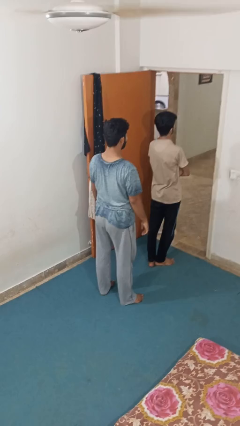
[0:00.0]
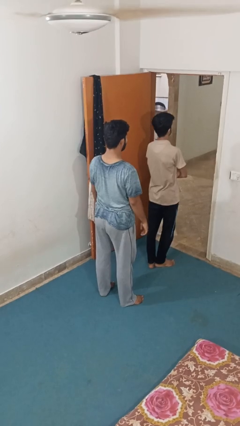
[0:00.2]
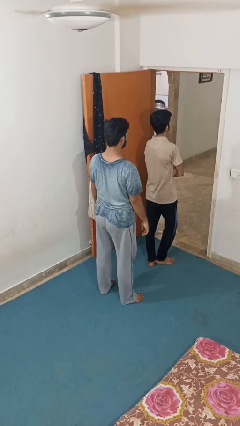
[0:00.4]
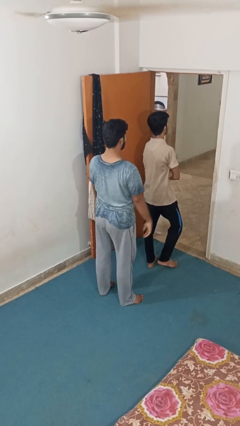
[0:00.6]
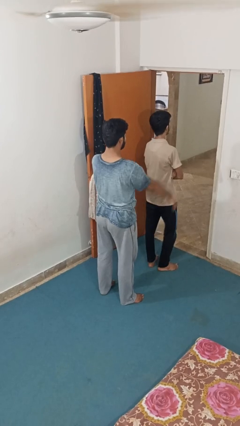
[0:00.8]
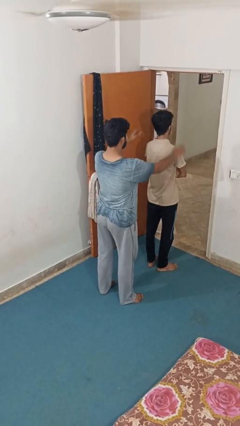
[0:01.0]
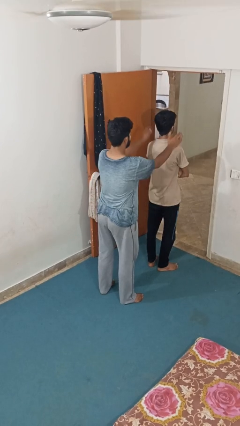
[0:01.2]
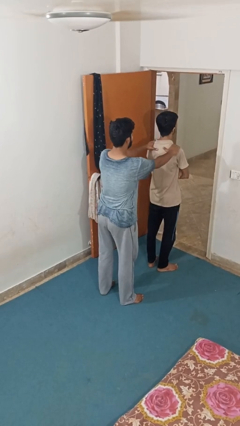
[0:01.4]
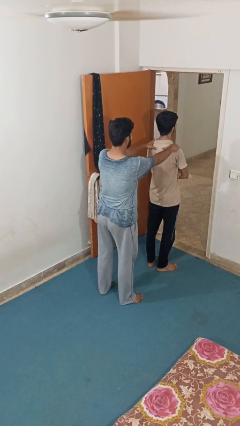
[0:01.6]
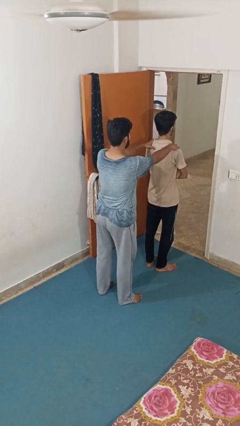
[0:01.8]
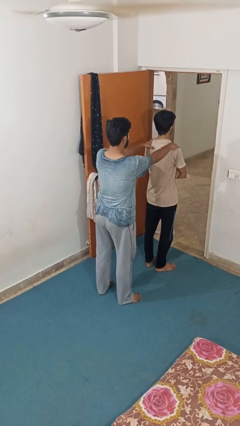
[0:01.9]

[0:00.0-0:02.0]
person grabs person by shoulder

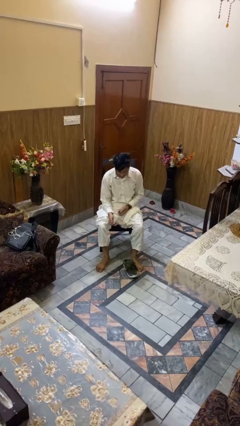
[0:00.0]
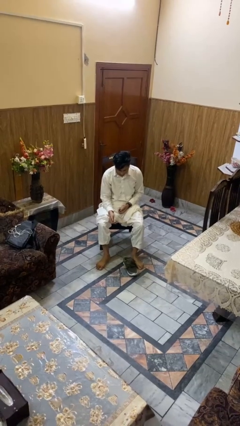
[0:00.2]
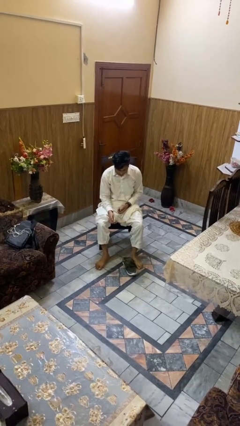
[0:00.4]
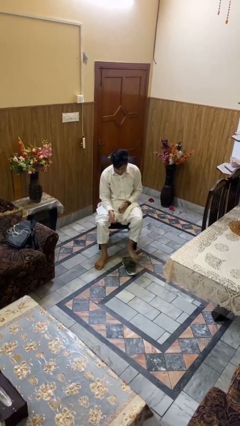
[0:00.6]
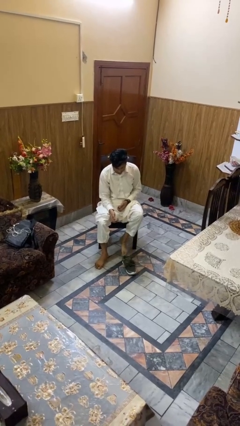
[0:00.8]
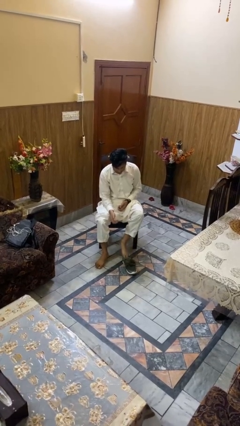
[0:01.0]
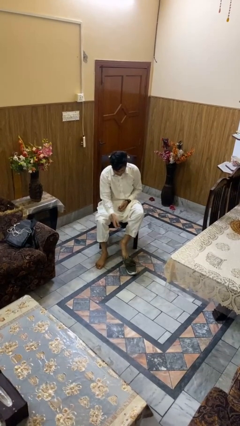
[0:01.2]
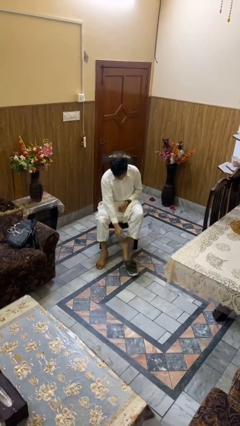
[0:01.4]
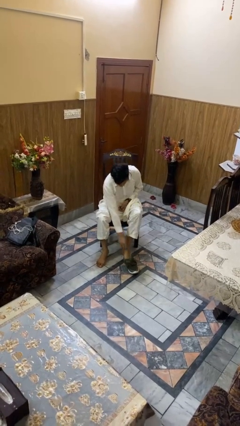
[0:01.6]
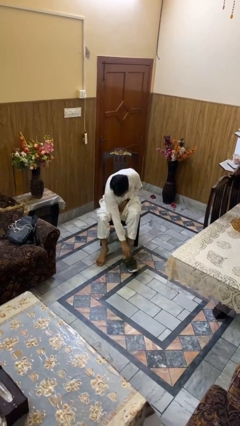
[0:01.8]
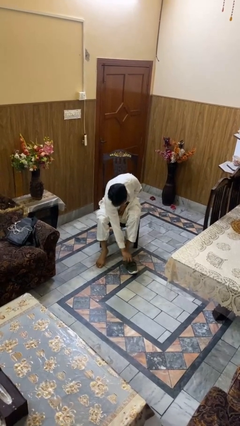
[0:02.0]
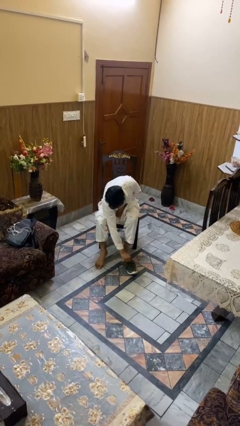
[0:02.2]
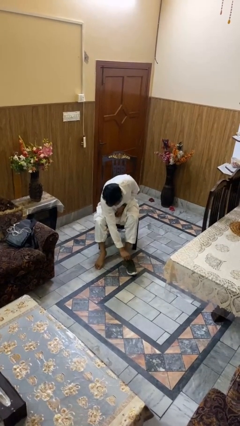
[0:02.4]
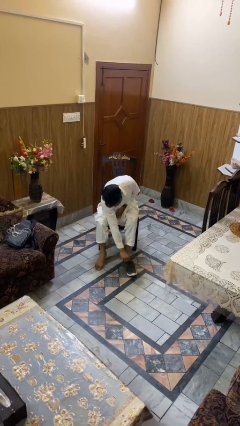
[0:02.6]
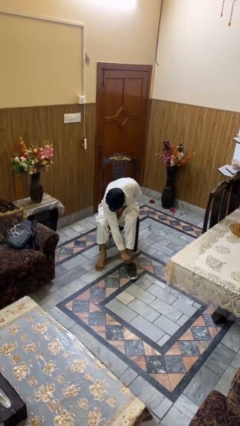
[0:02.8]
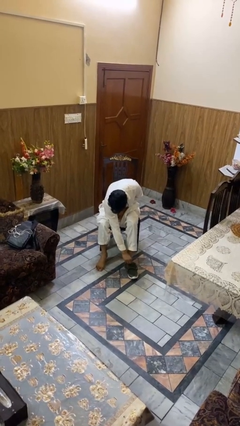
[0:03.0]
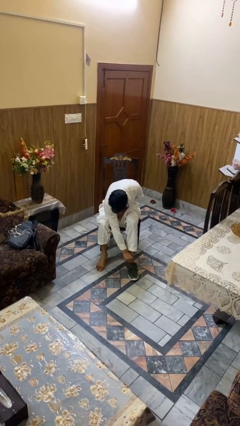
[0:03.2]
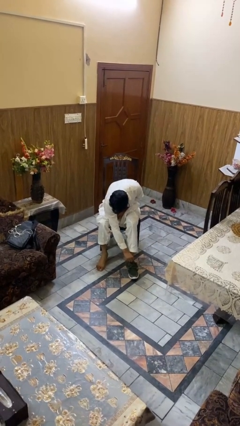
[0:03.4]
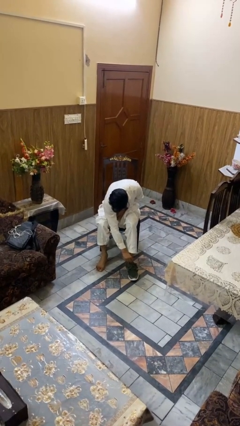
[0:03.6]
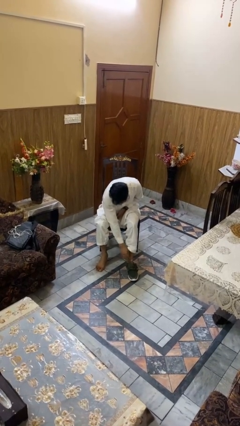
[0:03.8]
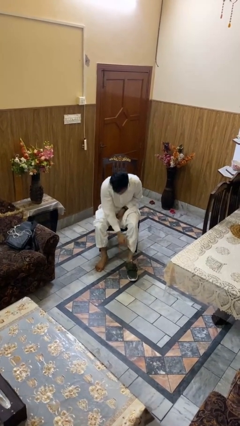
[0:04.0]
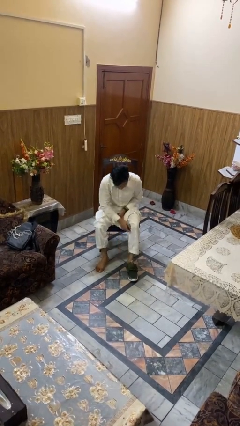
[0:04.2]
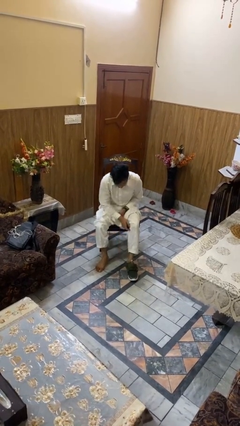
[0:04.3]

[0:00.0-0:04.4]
person puts on shoes

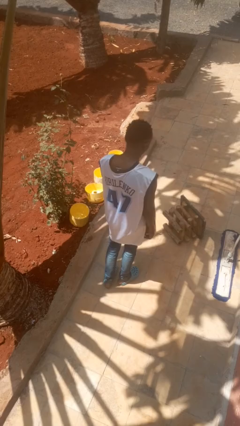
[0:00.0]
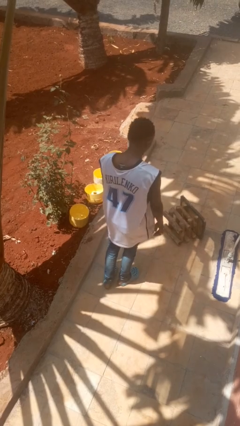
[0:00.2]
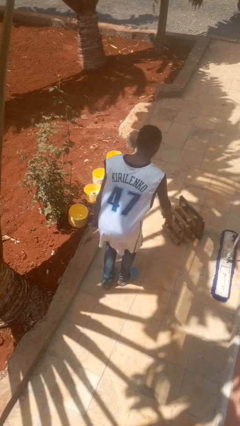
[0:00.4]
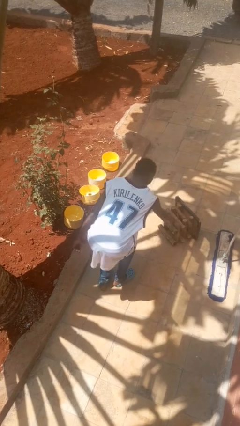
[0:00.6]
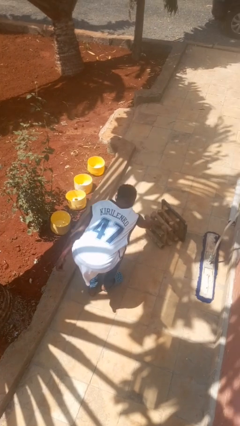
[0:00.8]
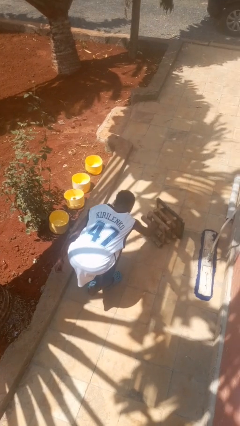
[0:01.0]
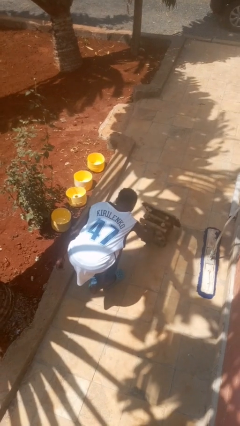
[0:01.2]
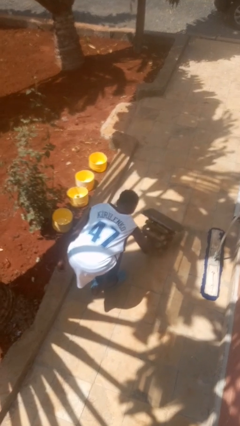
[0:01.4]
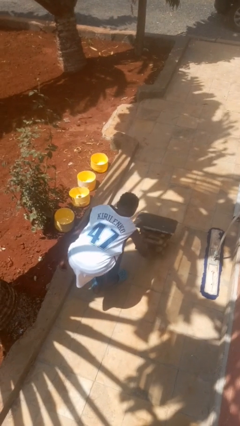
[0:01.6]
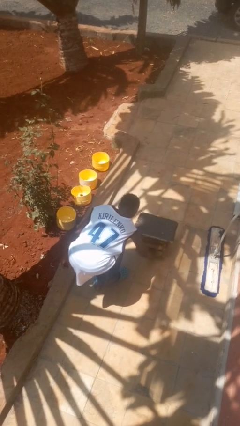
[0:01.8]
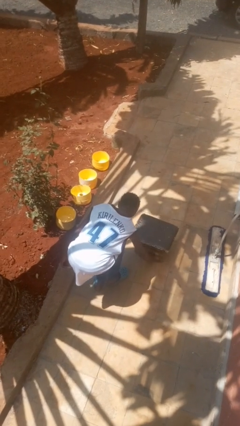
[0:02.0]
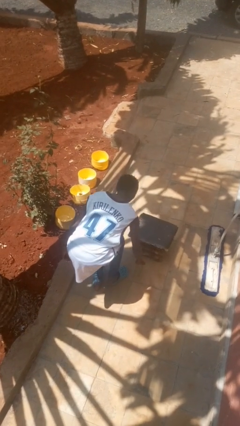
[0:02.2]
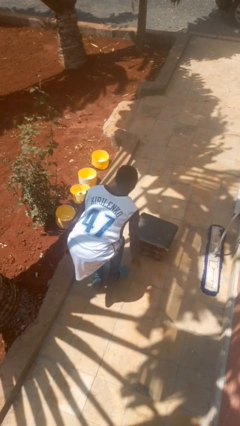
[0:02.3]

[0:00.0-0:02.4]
person sets upright furniture

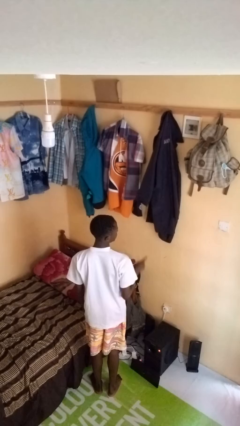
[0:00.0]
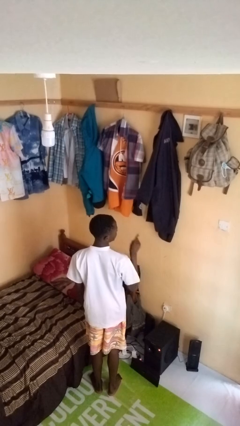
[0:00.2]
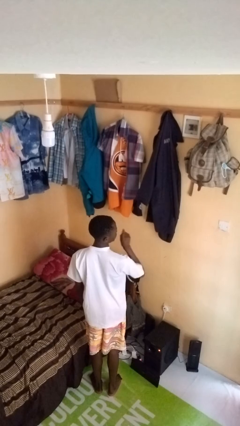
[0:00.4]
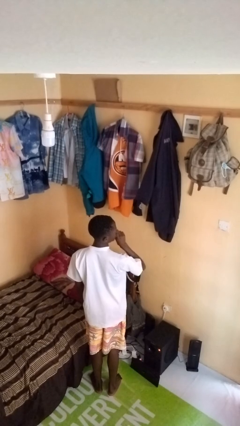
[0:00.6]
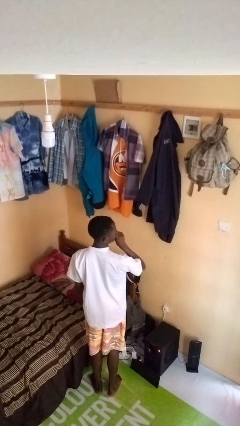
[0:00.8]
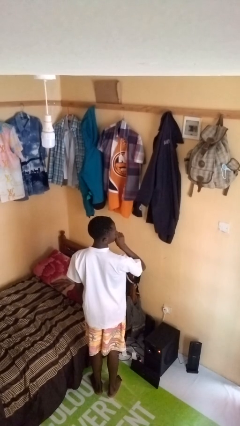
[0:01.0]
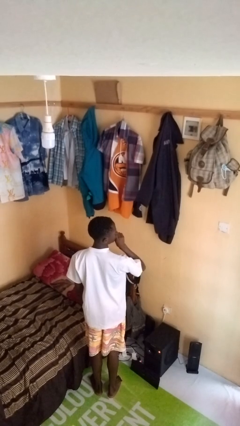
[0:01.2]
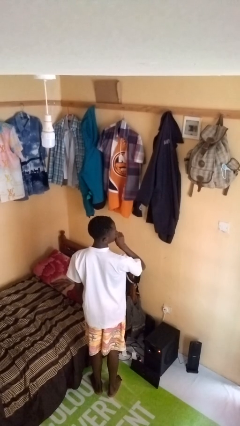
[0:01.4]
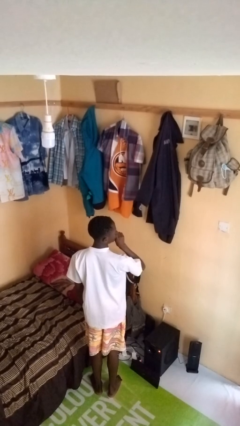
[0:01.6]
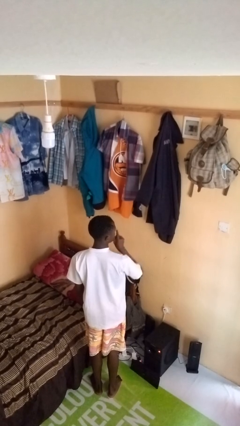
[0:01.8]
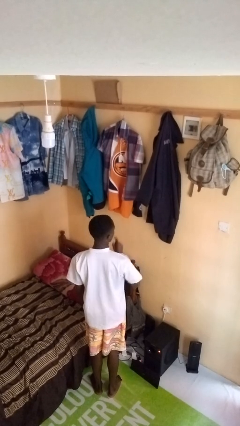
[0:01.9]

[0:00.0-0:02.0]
person gestures be quiet

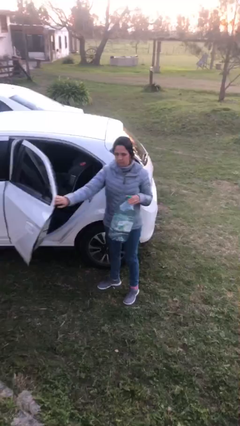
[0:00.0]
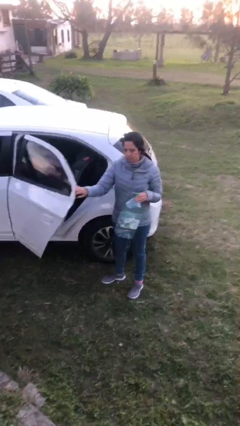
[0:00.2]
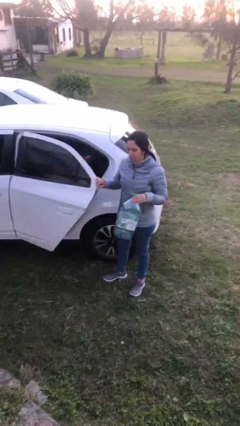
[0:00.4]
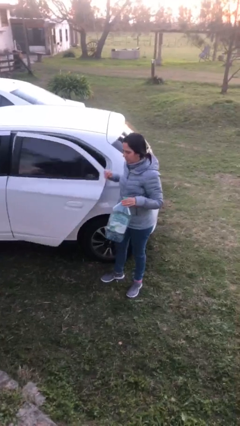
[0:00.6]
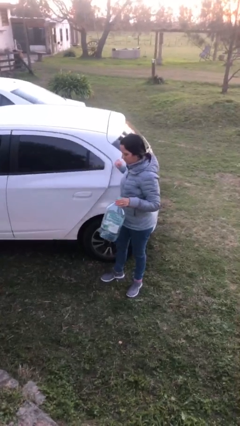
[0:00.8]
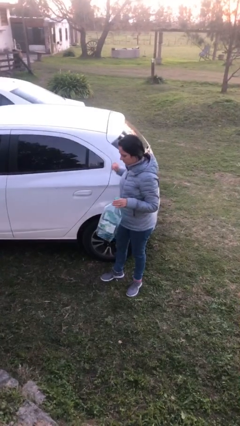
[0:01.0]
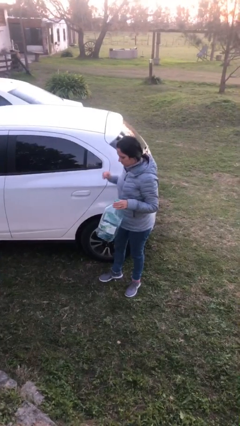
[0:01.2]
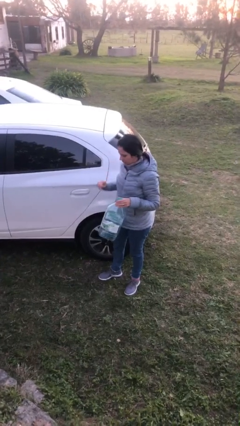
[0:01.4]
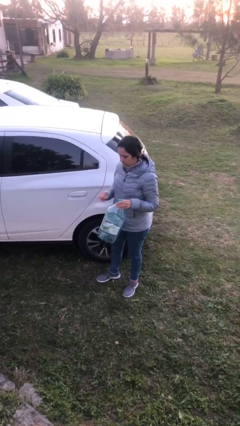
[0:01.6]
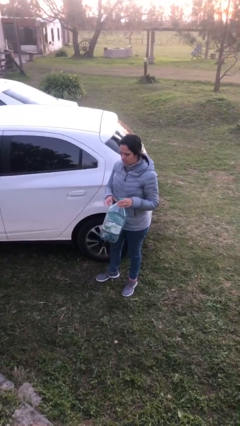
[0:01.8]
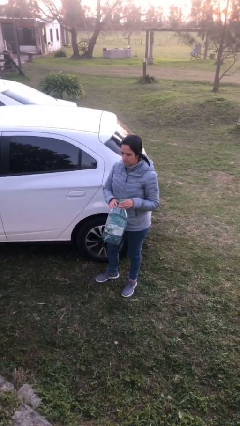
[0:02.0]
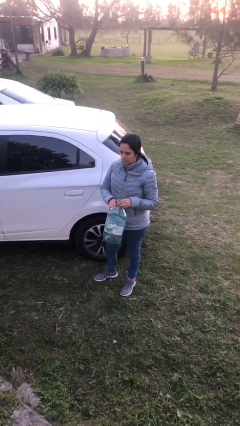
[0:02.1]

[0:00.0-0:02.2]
person closes car door

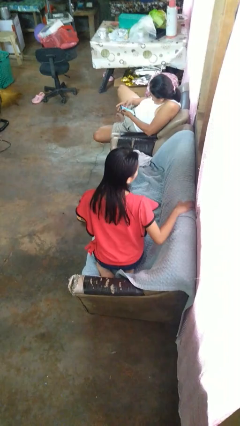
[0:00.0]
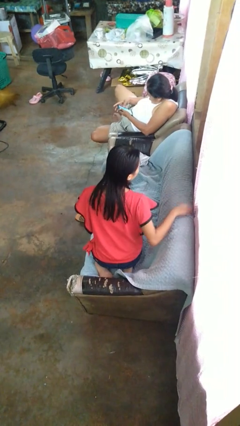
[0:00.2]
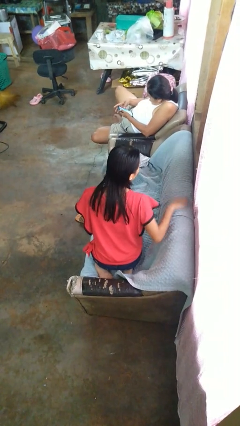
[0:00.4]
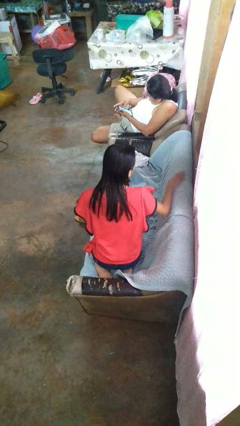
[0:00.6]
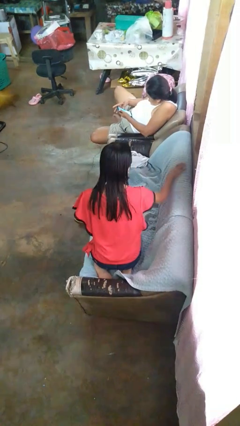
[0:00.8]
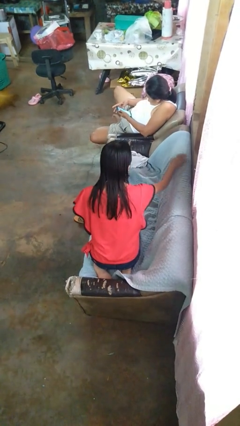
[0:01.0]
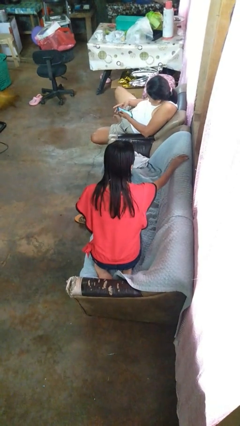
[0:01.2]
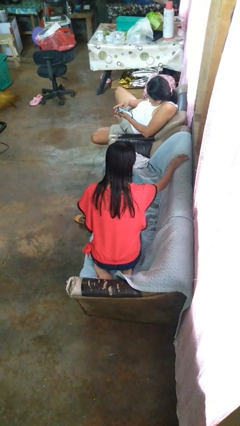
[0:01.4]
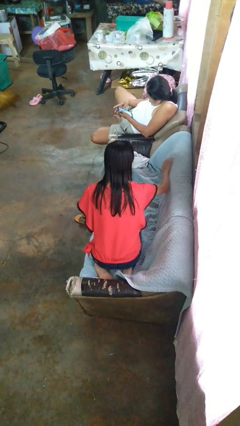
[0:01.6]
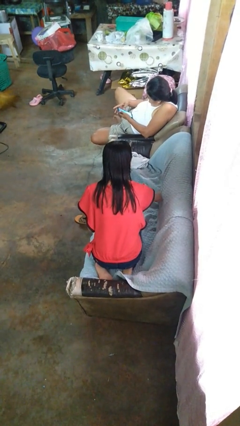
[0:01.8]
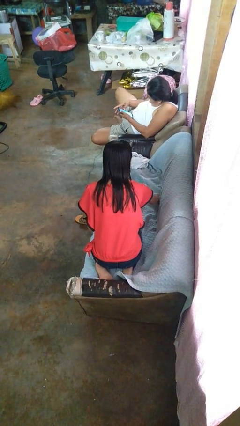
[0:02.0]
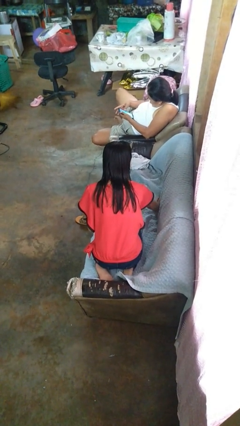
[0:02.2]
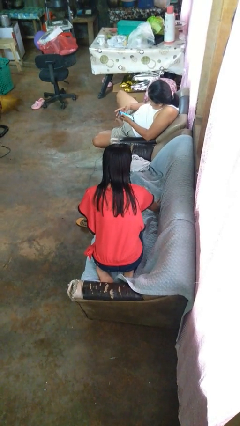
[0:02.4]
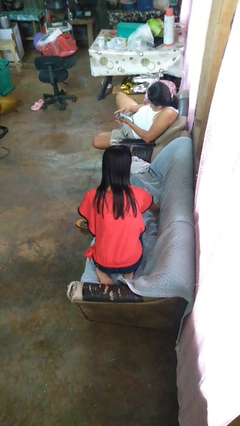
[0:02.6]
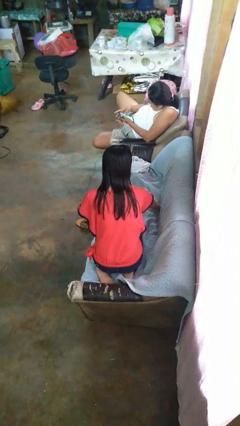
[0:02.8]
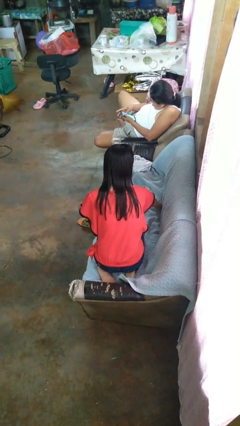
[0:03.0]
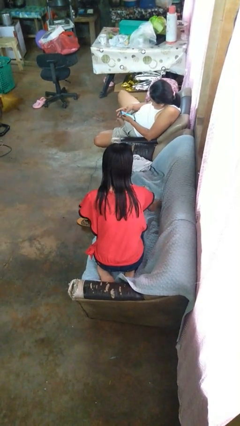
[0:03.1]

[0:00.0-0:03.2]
person searches in couch

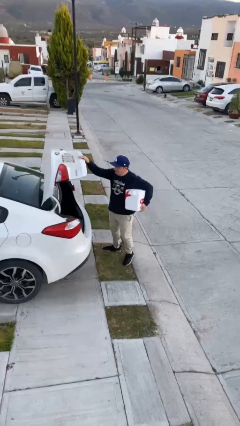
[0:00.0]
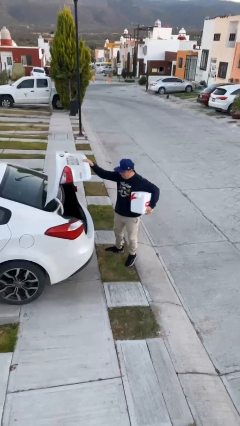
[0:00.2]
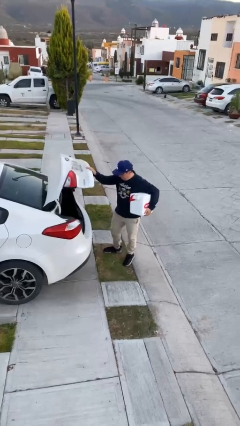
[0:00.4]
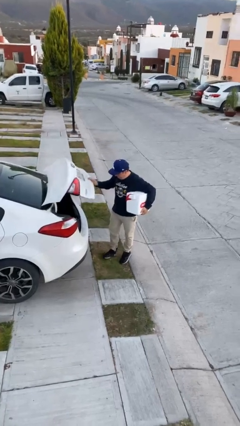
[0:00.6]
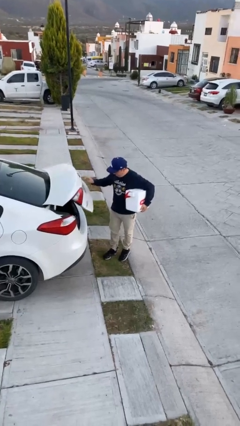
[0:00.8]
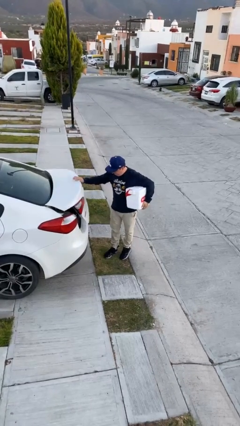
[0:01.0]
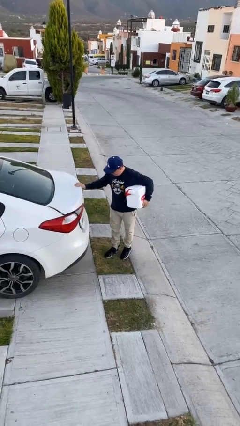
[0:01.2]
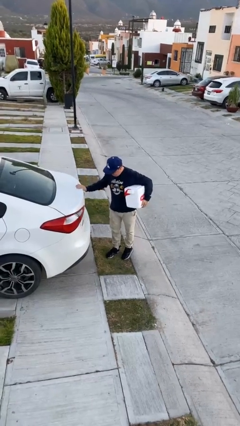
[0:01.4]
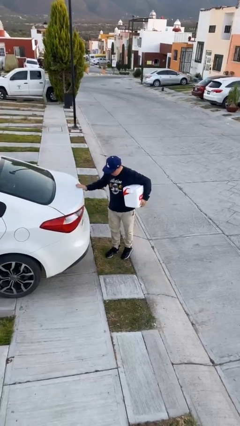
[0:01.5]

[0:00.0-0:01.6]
person closes car trunk
